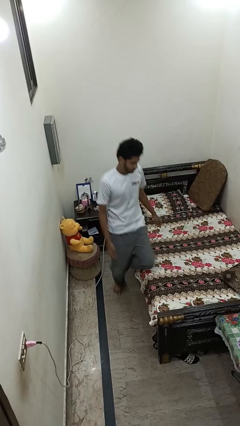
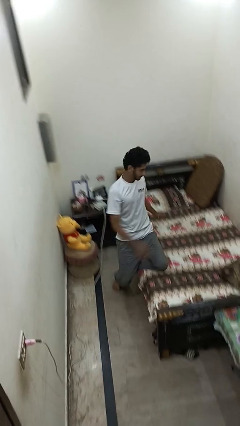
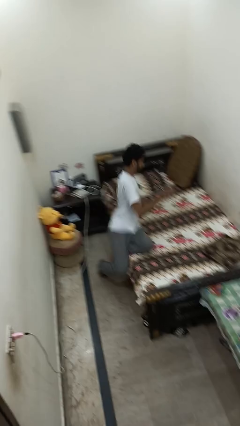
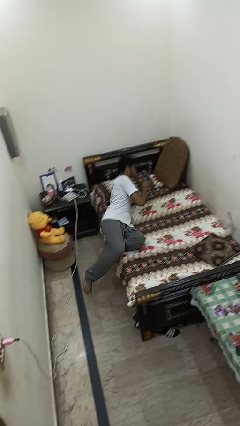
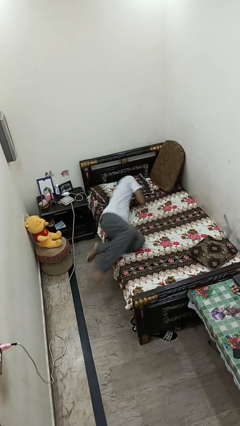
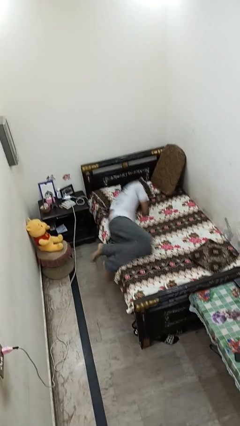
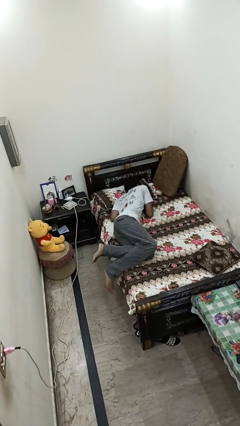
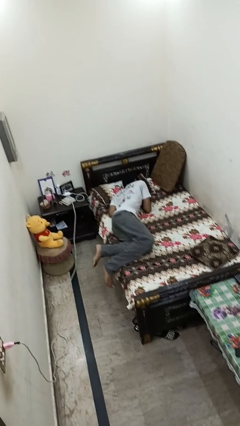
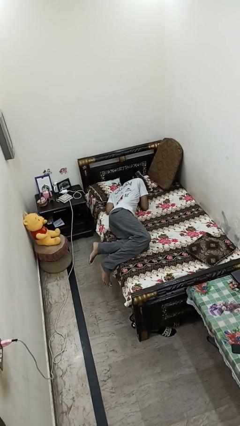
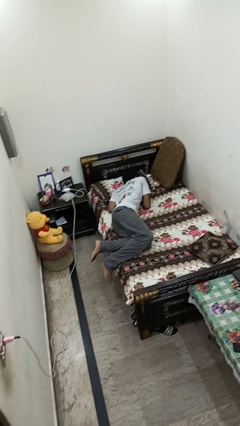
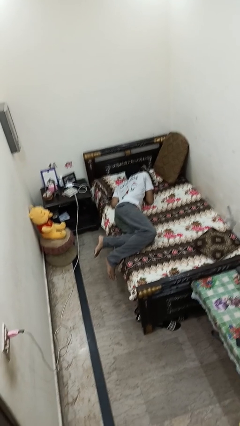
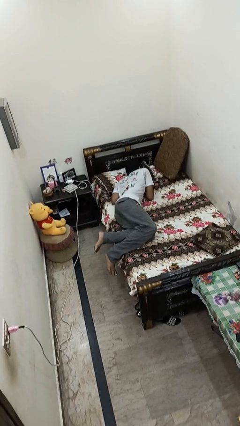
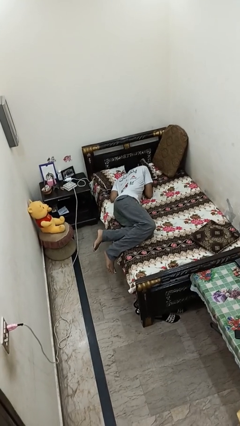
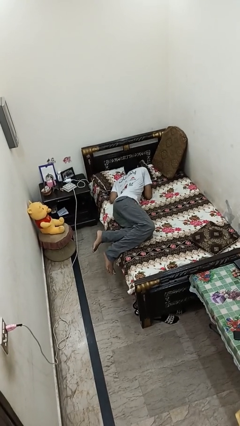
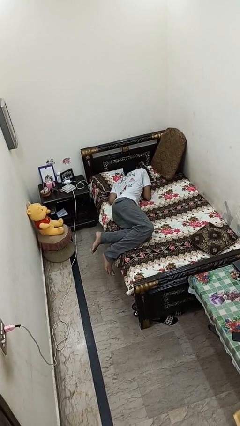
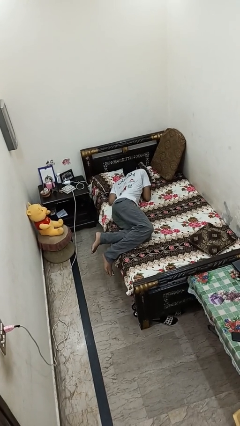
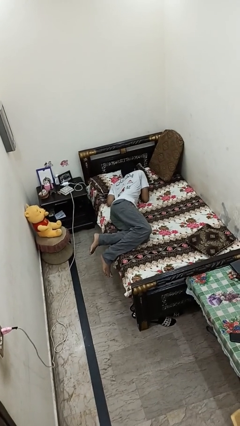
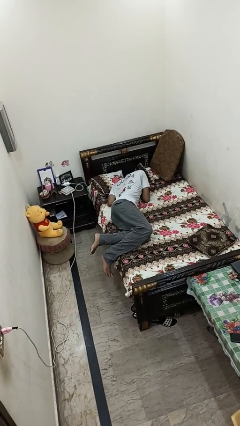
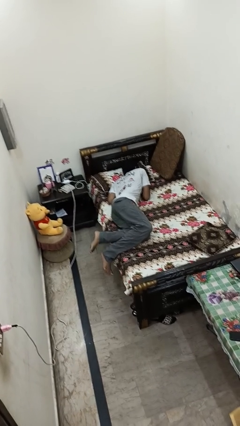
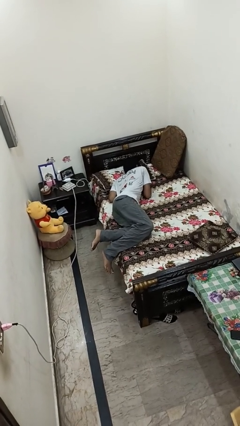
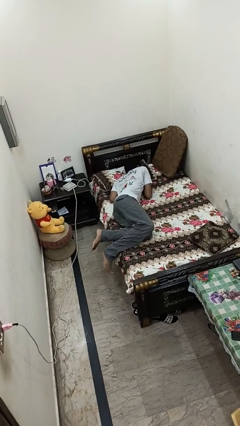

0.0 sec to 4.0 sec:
person lies down on bed

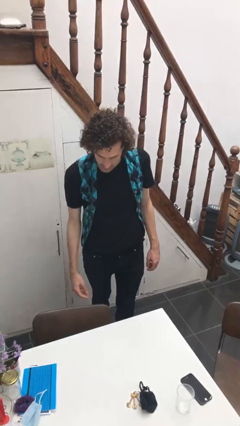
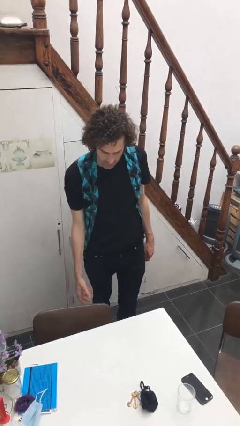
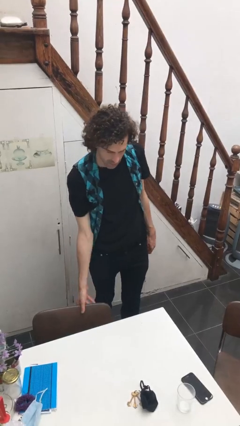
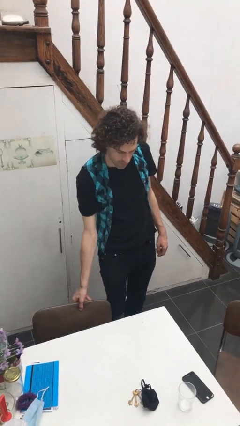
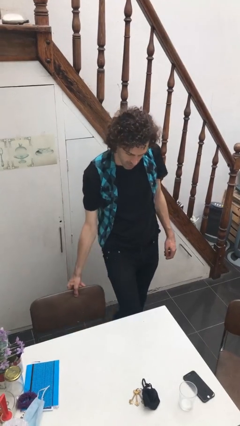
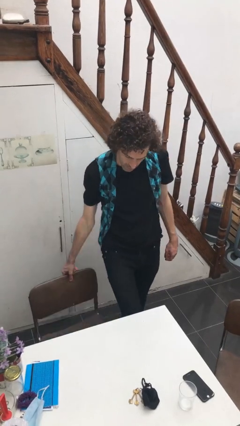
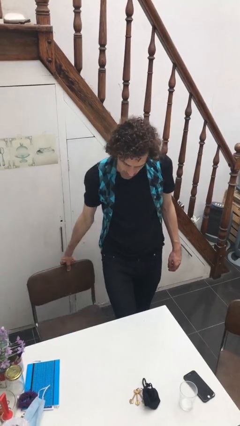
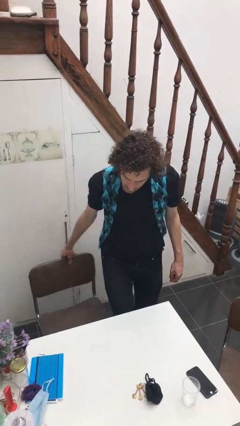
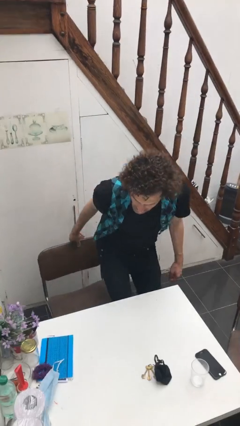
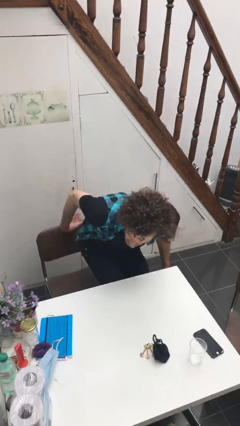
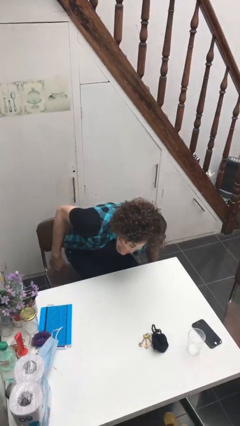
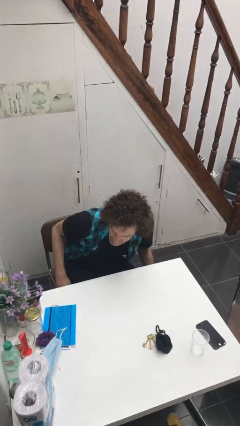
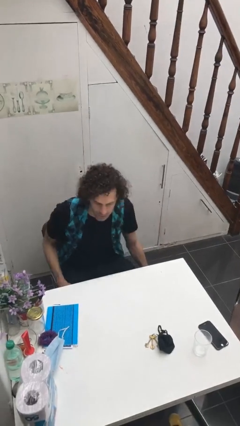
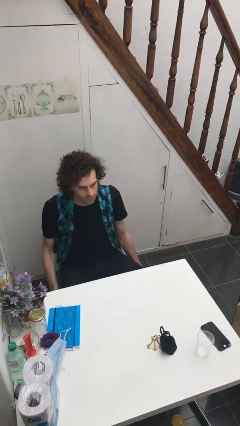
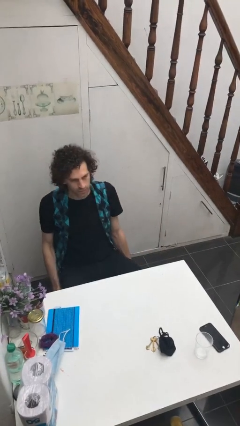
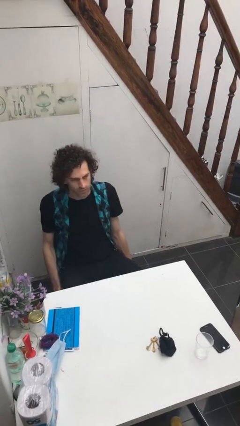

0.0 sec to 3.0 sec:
person sits down

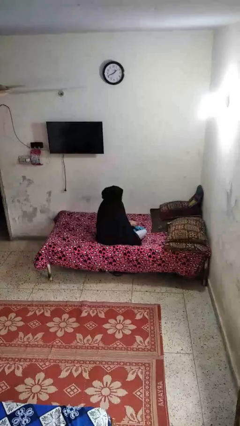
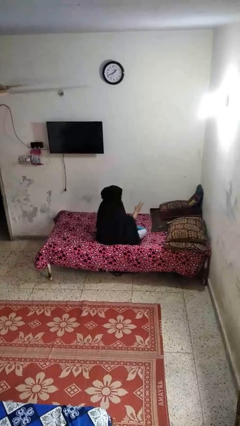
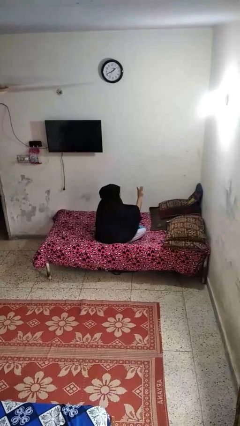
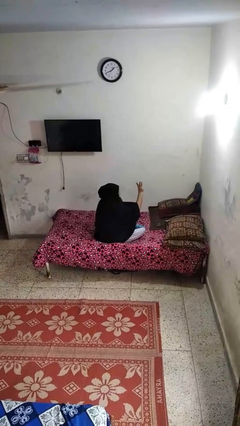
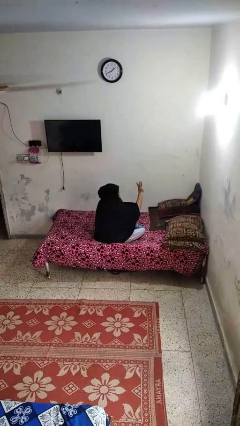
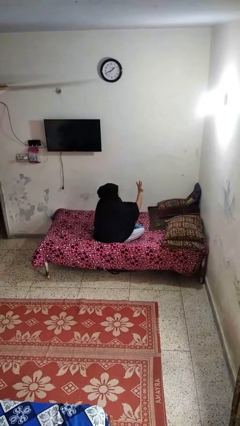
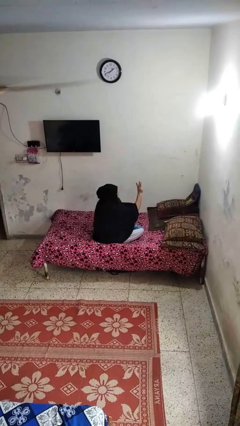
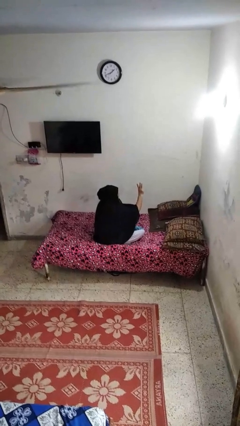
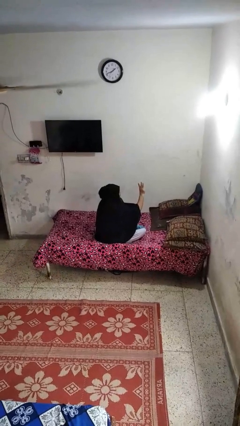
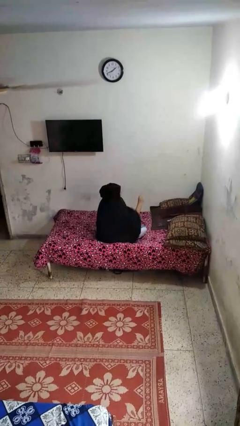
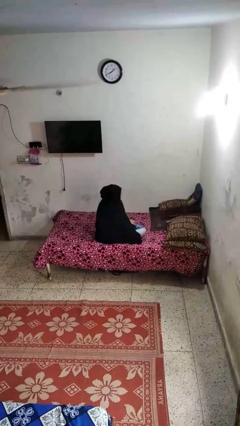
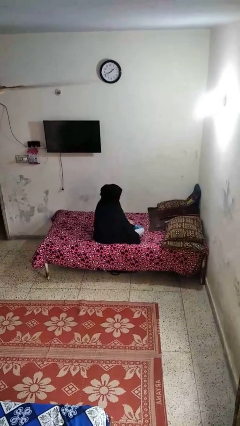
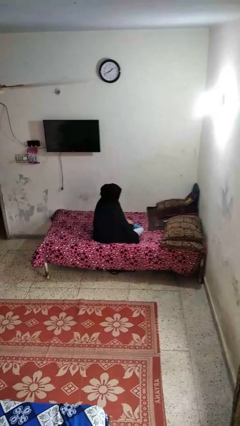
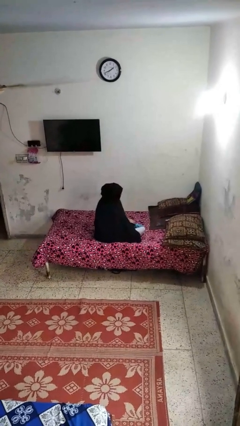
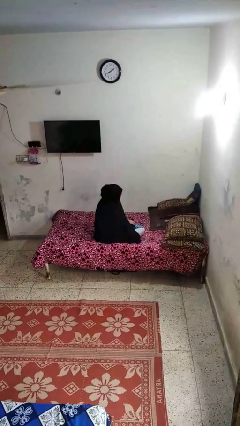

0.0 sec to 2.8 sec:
person gestures number three

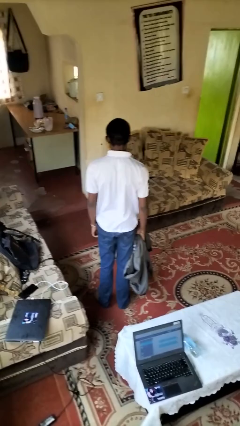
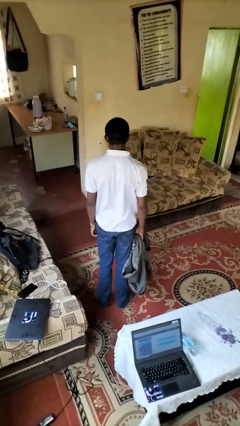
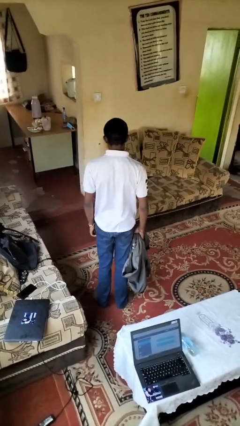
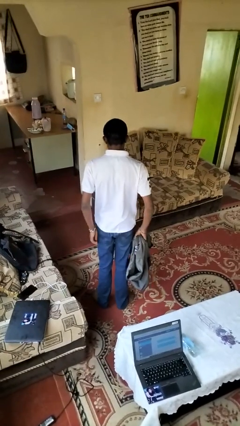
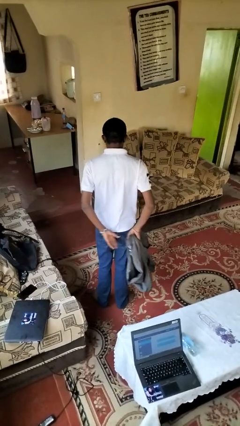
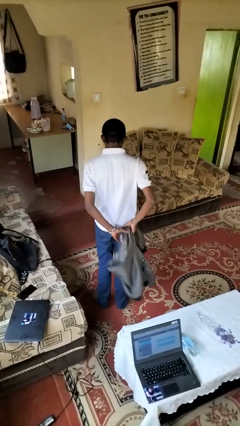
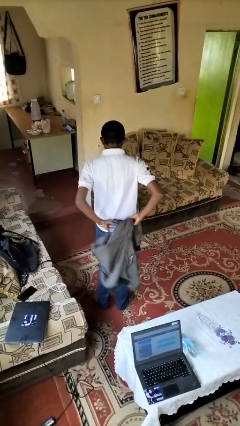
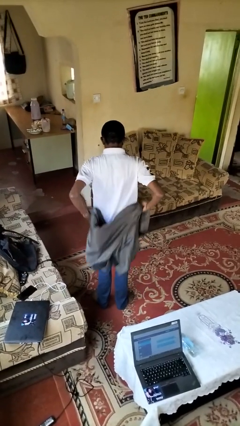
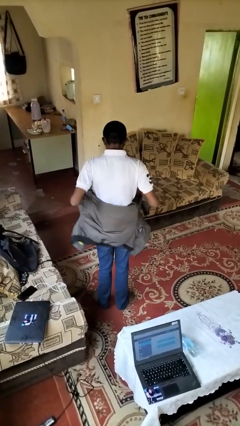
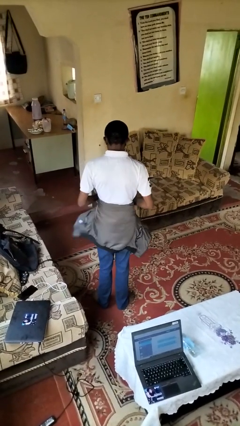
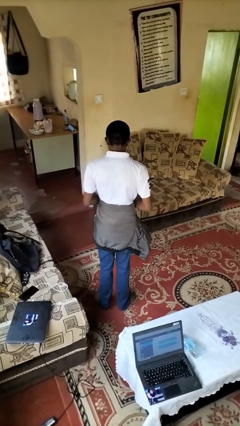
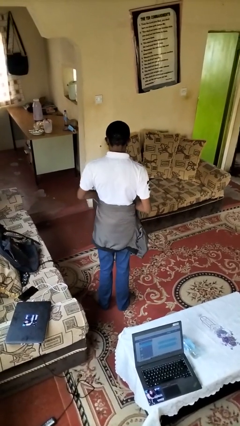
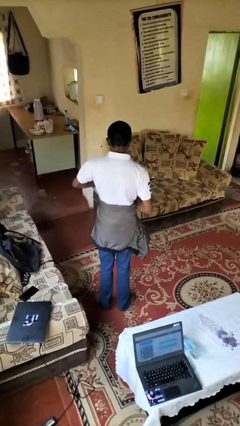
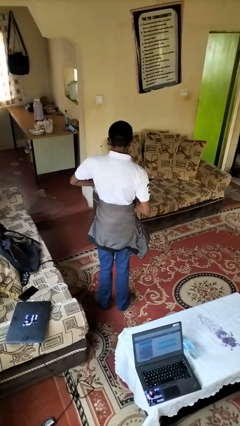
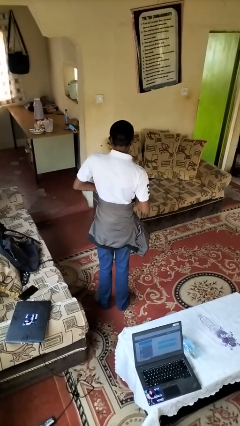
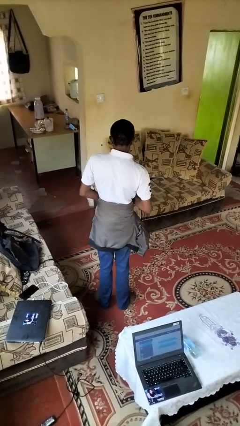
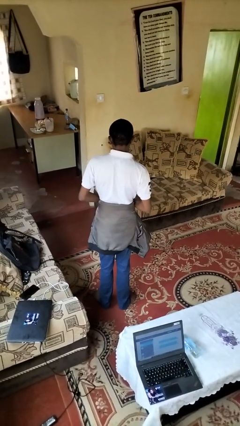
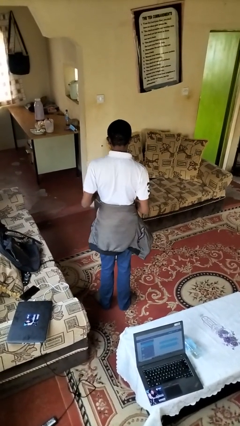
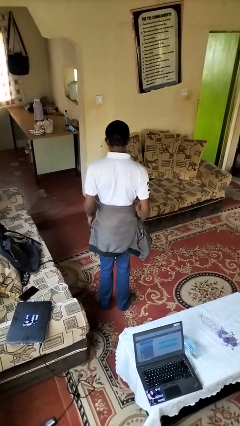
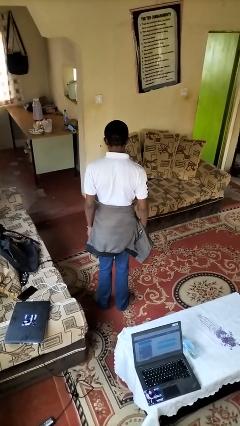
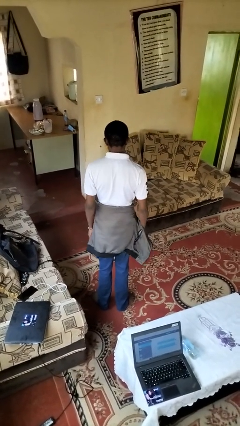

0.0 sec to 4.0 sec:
person ties jacket around waist

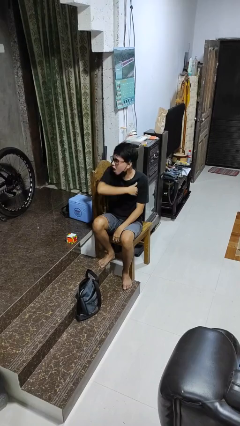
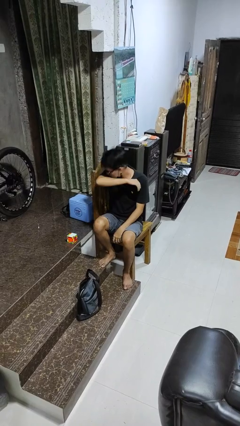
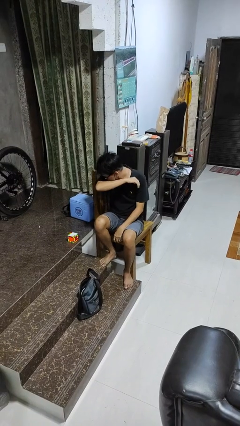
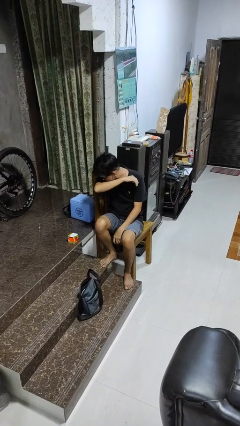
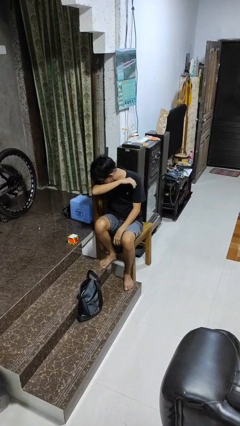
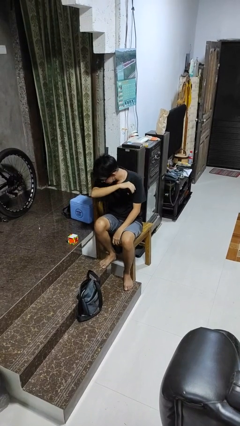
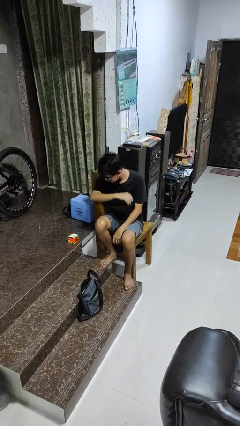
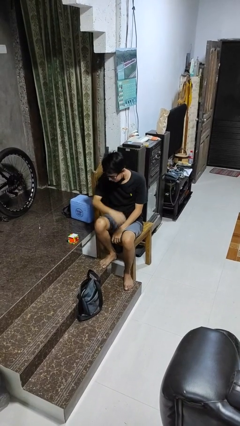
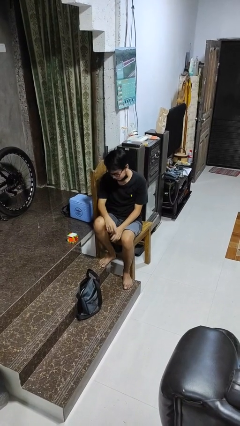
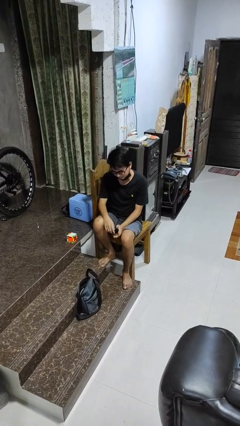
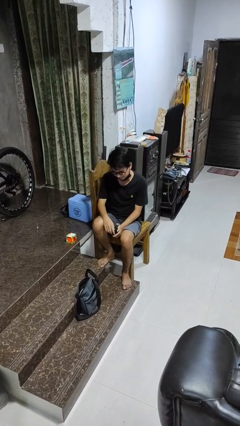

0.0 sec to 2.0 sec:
person sneezes into arm

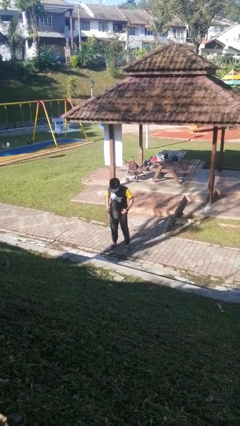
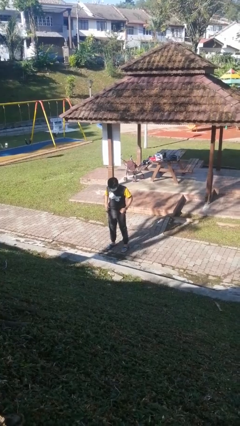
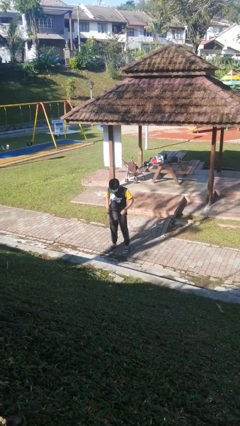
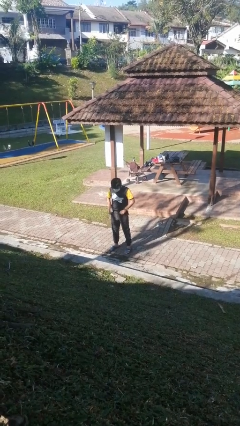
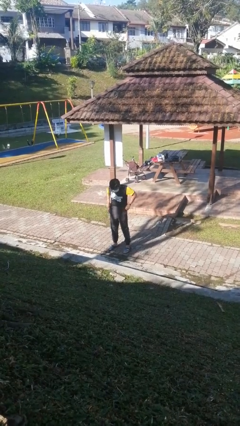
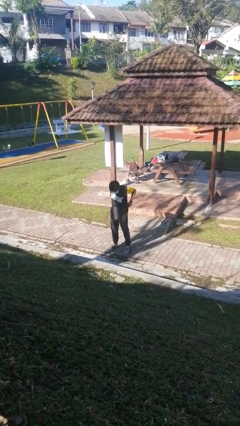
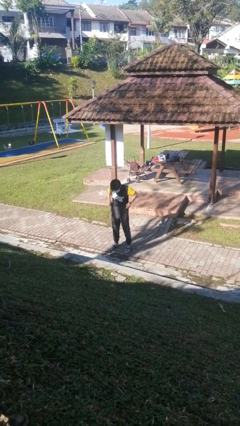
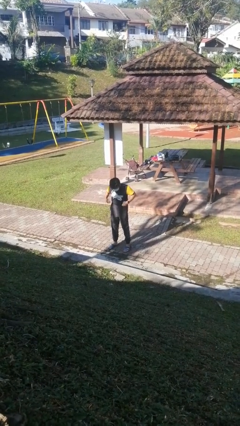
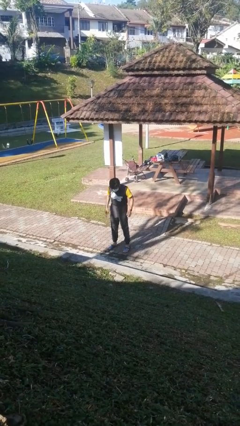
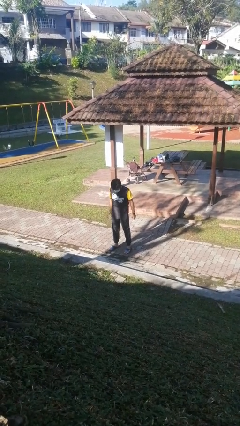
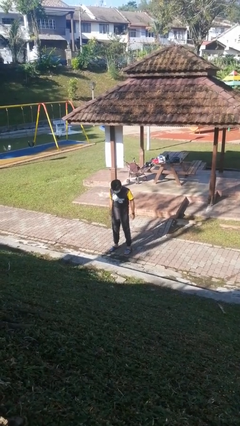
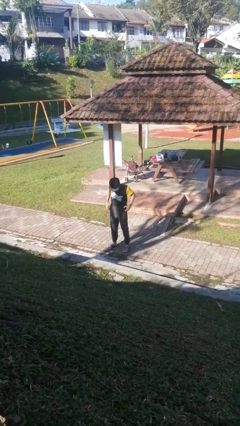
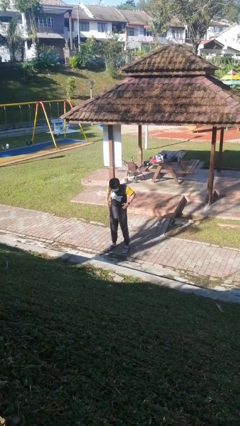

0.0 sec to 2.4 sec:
person hikes up pants
